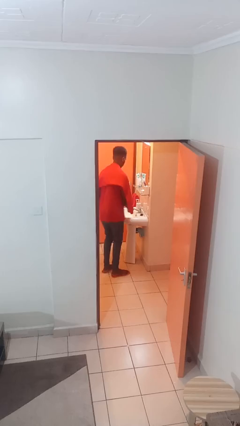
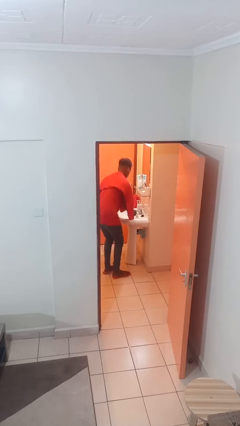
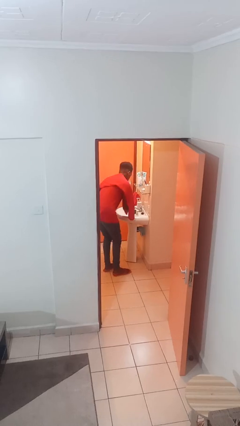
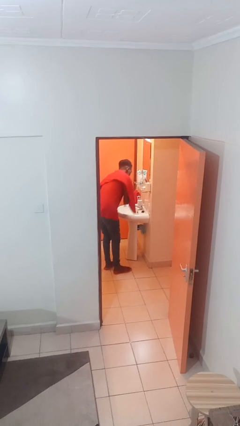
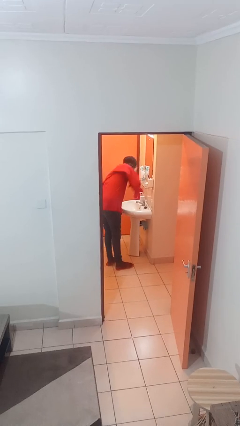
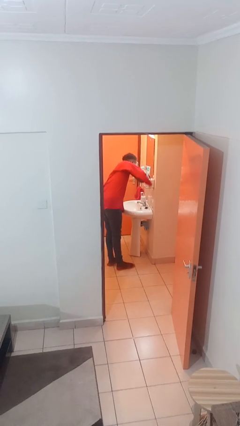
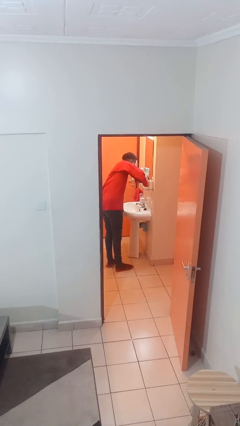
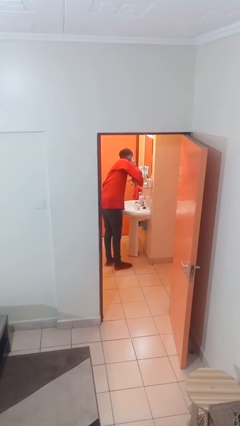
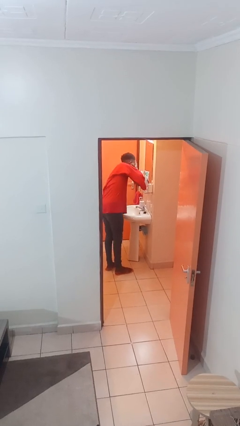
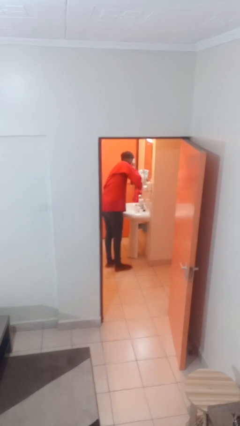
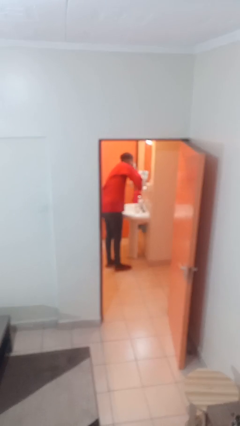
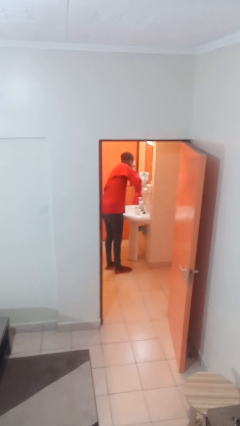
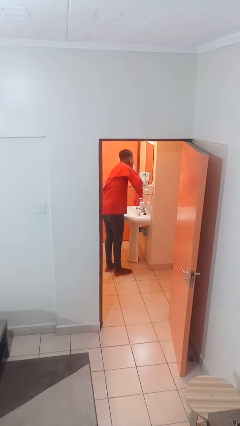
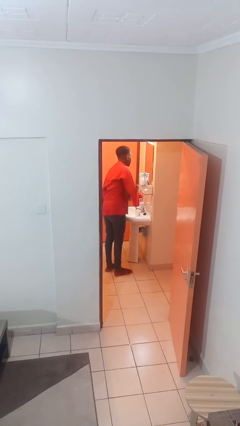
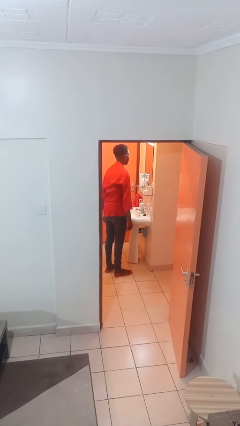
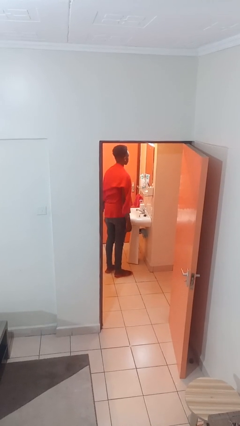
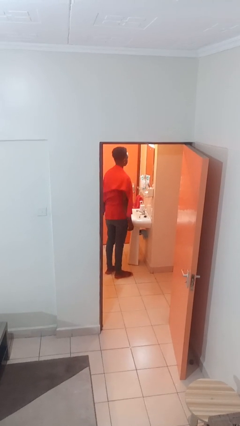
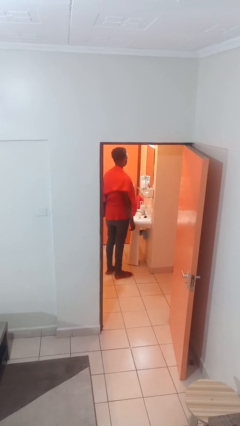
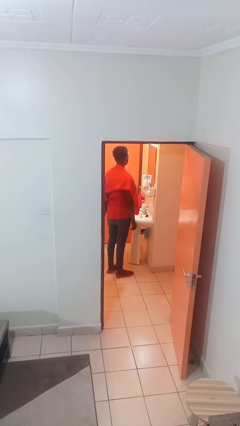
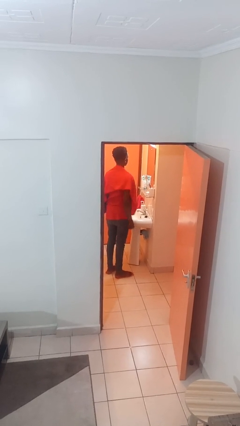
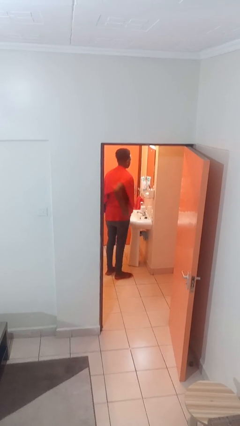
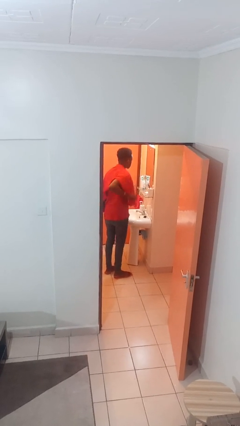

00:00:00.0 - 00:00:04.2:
person washes face

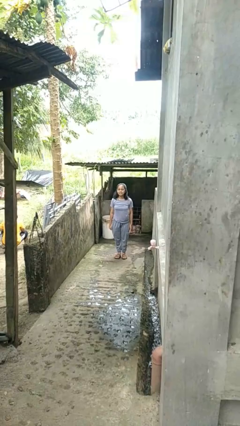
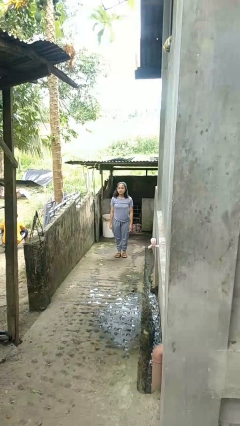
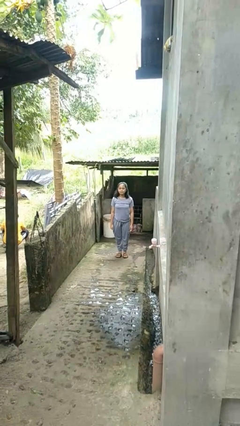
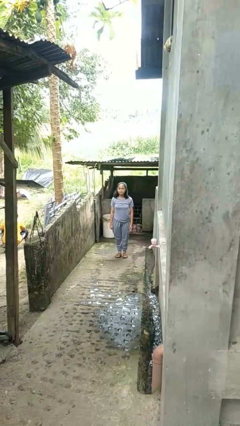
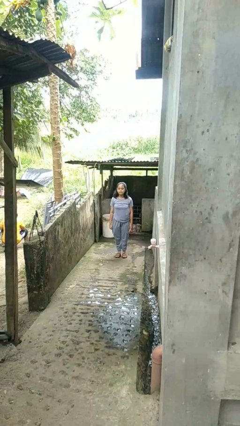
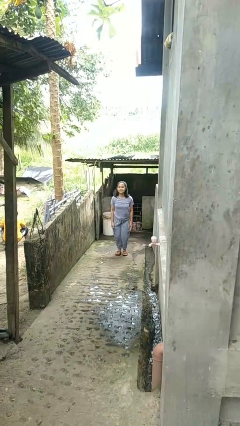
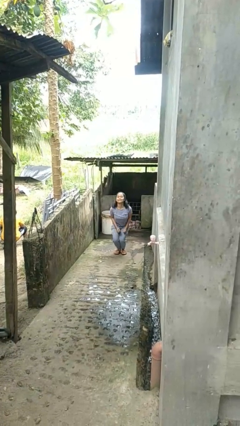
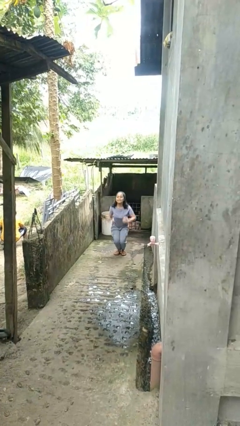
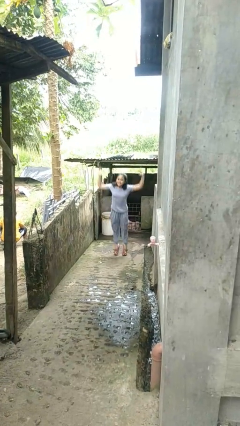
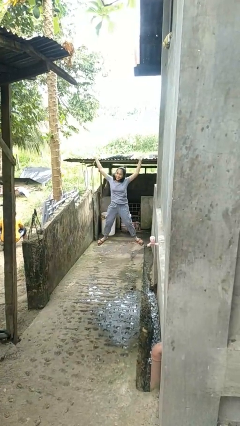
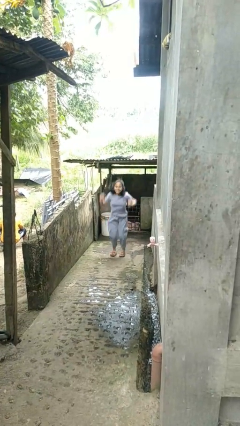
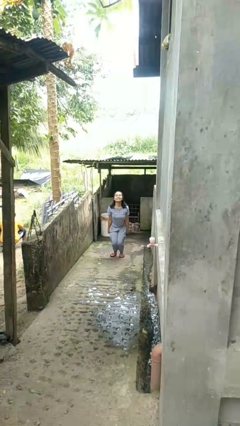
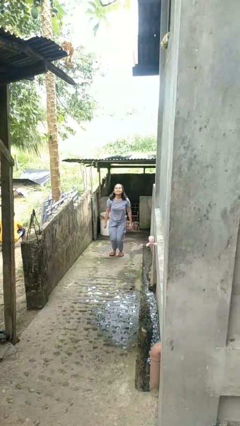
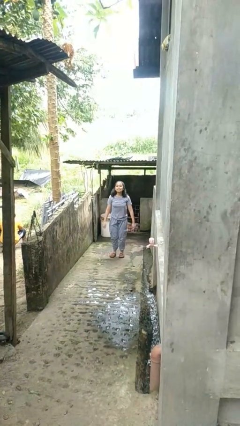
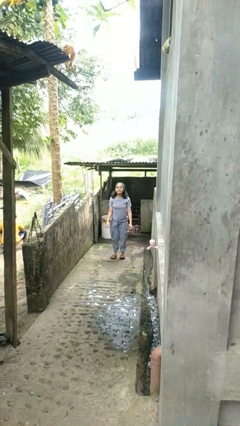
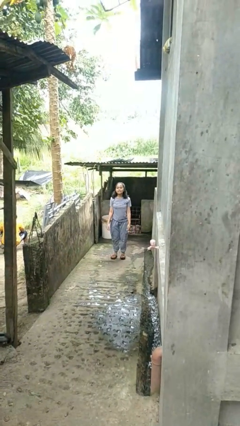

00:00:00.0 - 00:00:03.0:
person exercises with jumping jacks

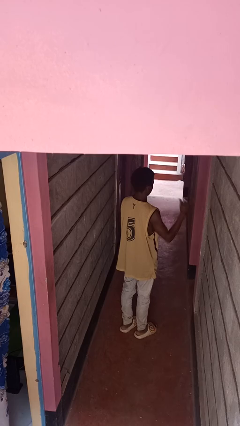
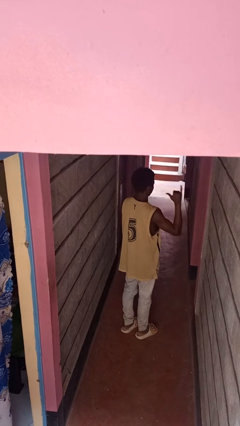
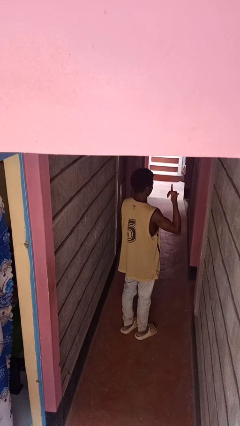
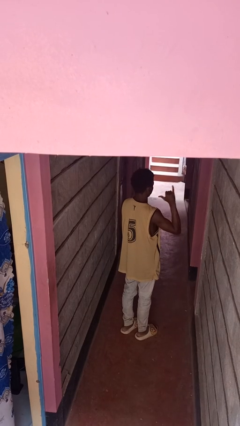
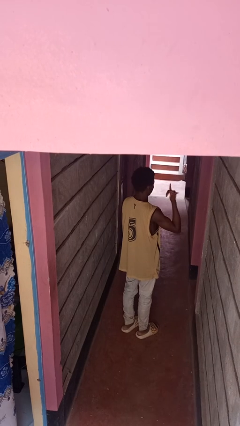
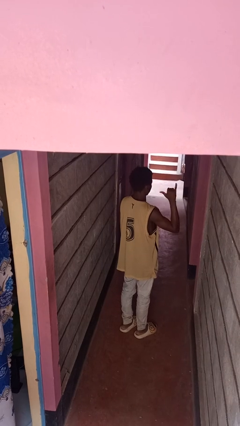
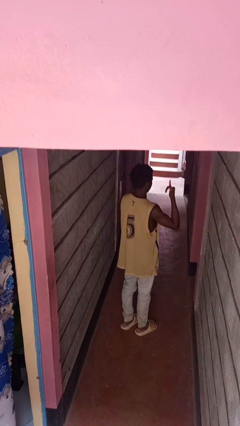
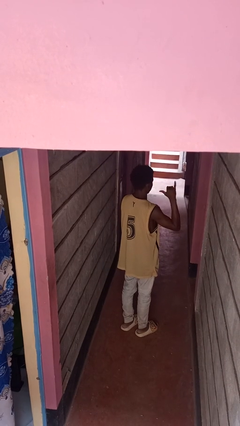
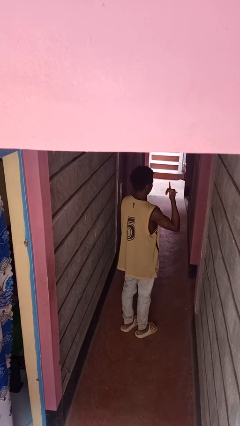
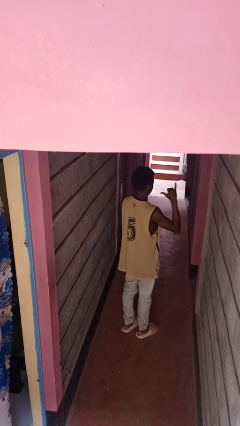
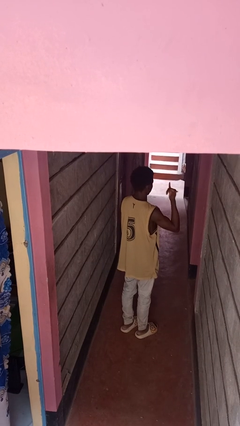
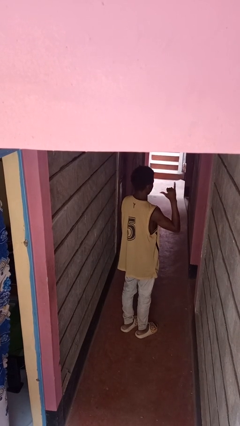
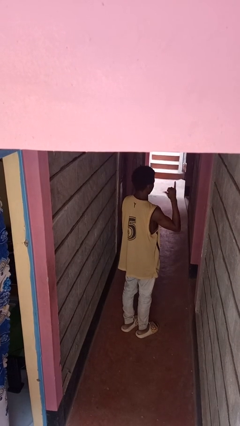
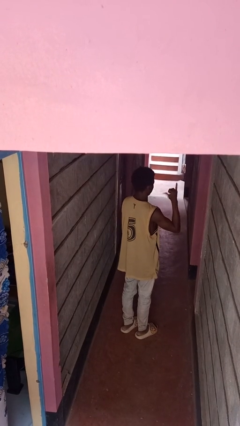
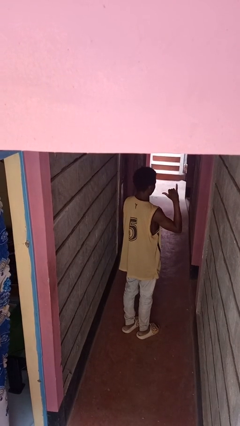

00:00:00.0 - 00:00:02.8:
person gestures hang loose

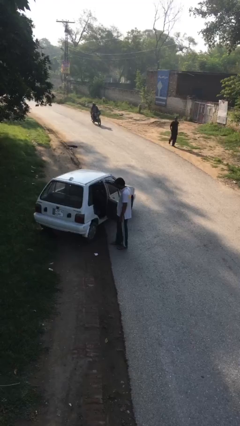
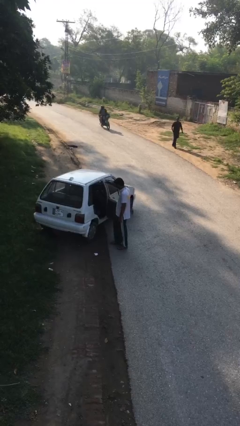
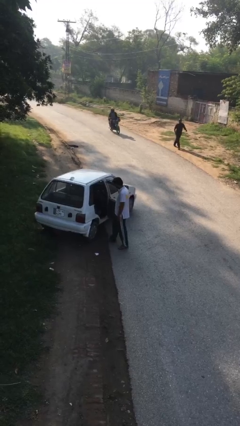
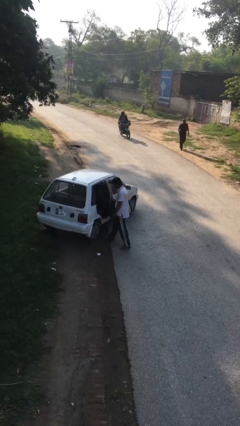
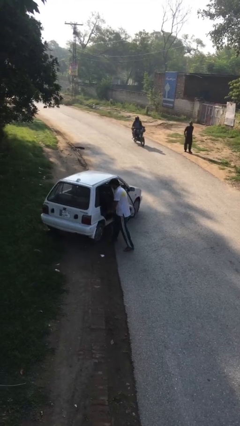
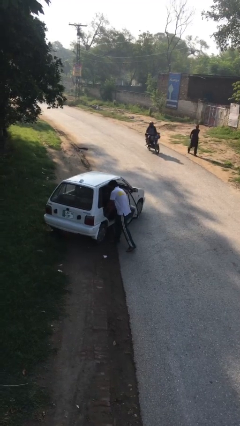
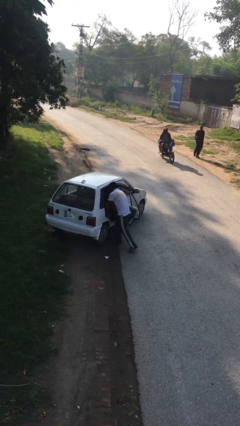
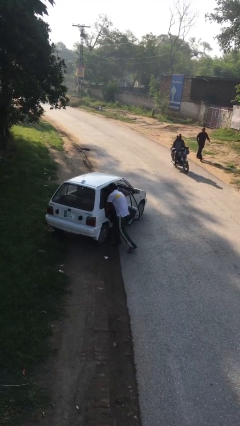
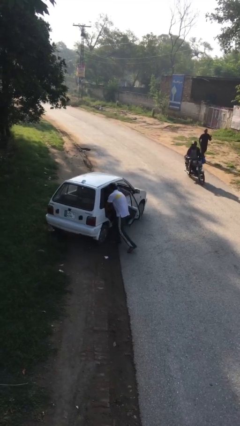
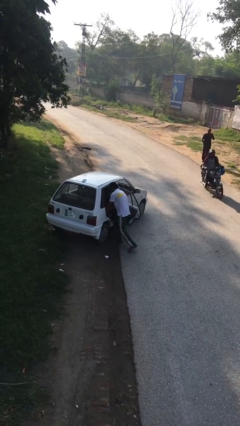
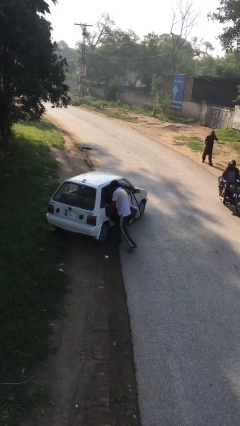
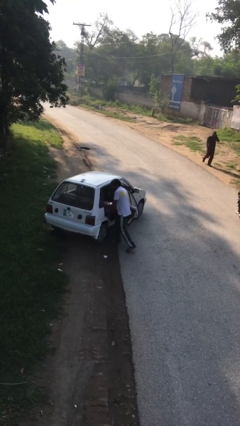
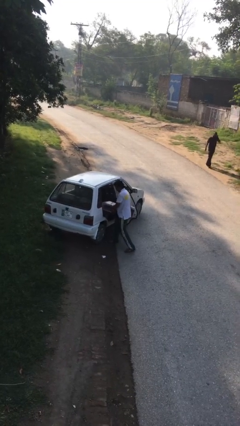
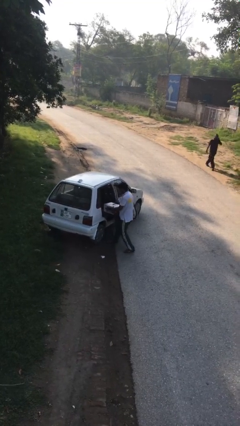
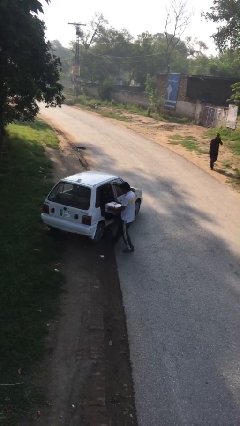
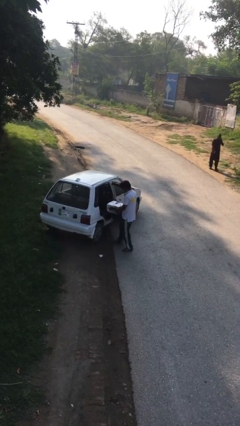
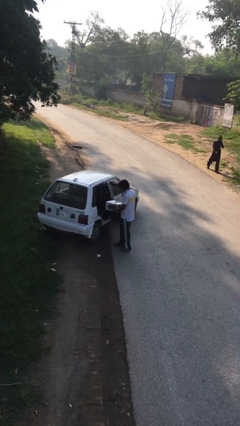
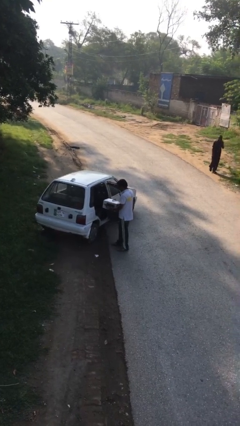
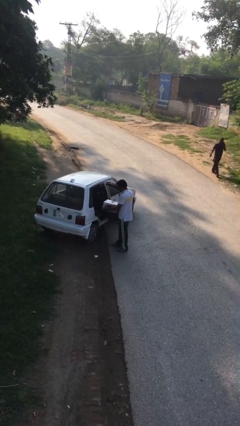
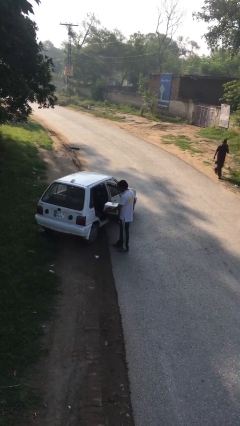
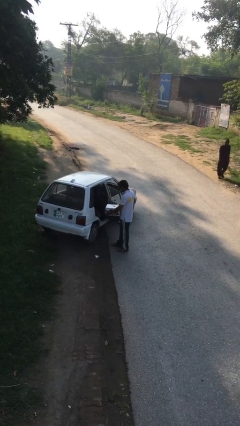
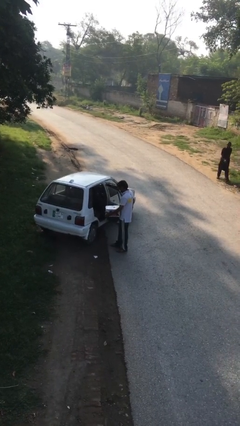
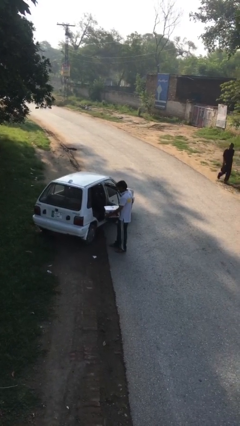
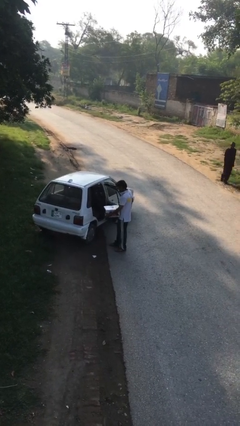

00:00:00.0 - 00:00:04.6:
person unloads car

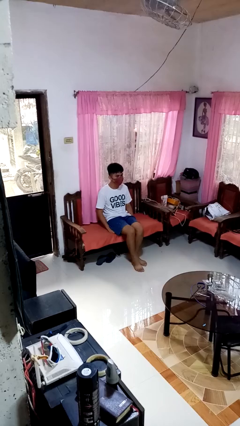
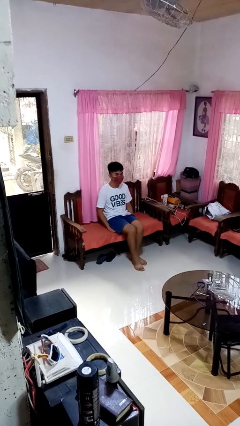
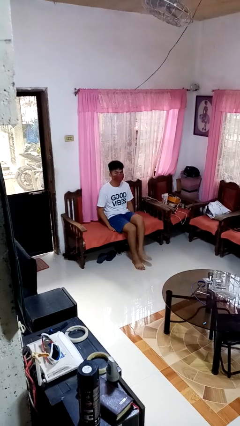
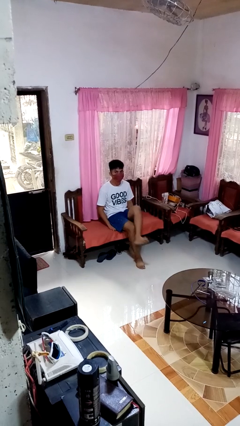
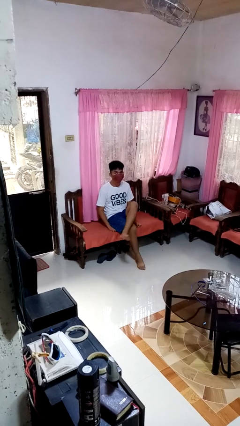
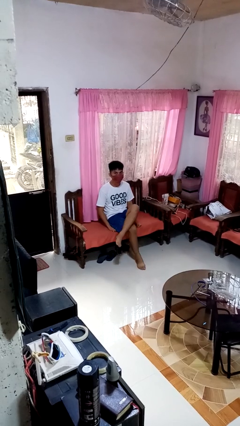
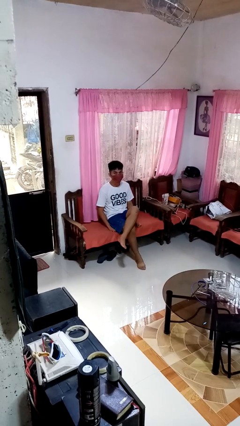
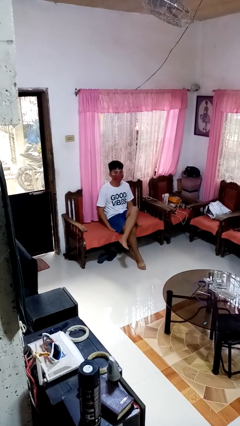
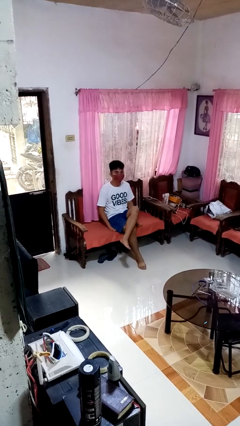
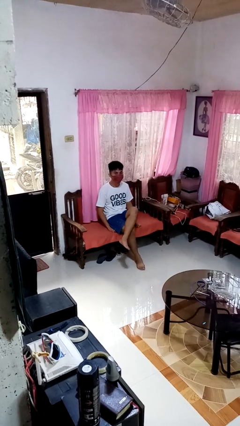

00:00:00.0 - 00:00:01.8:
person crosses legs

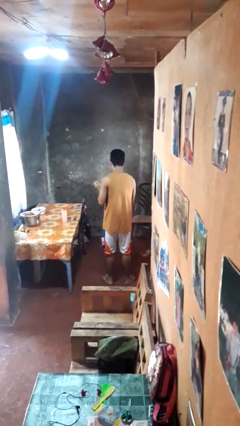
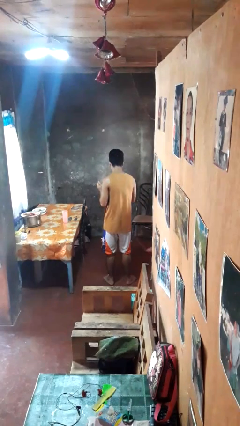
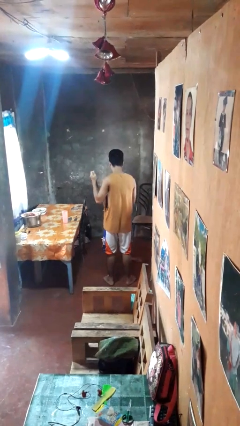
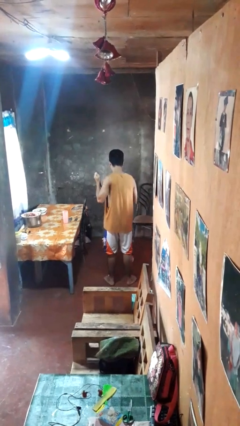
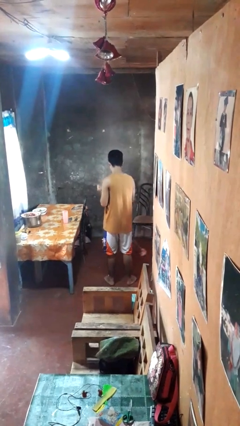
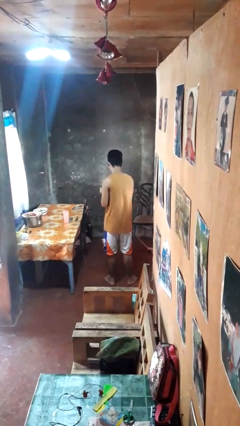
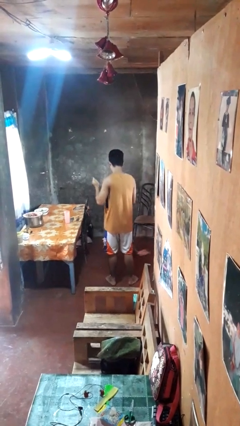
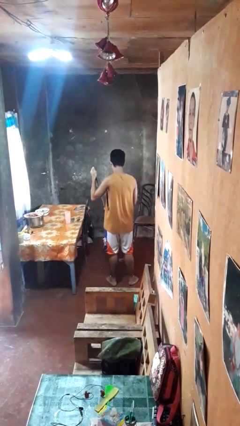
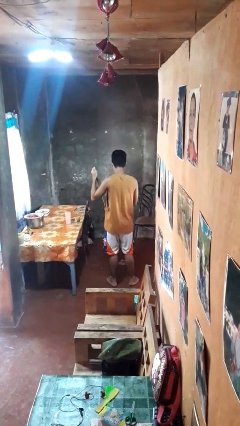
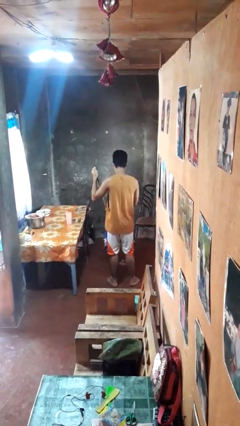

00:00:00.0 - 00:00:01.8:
person mops
